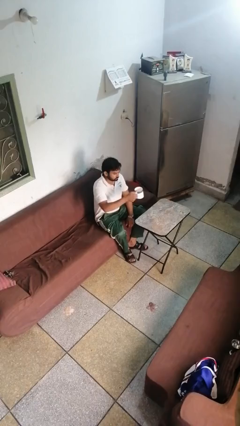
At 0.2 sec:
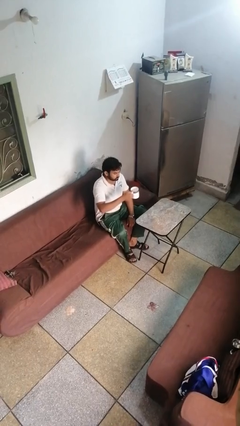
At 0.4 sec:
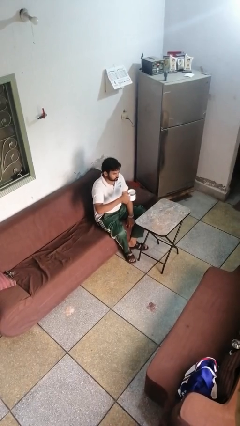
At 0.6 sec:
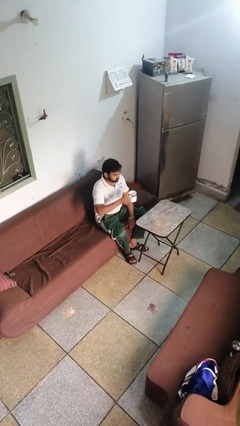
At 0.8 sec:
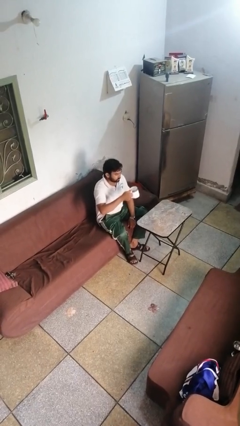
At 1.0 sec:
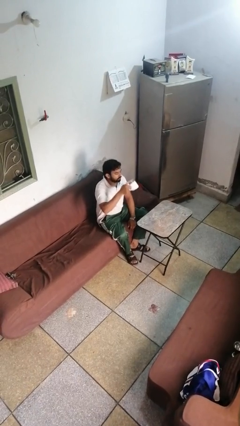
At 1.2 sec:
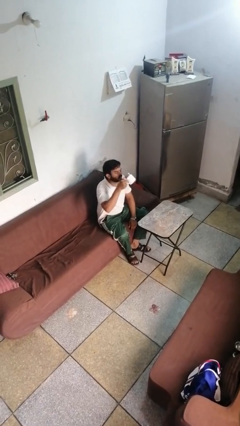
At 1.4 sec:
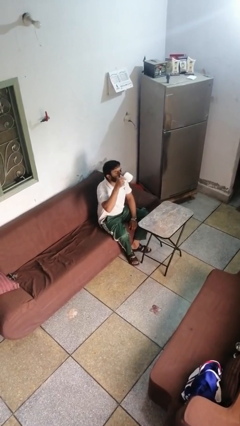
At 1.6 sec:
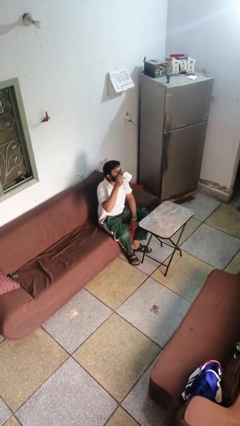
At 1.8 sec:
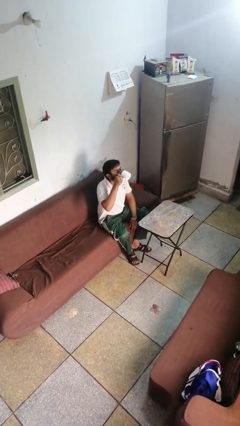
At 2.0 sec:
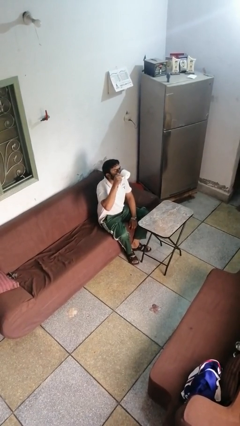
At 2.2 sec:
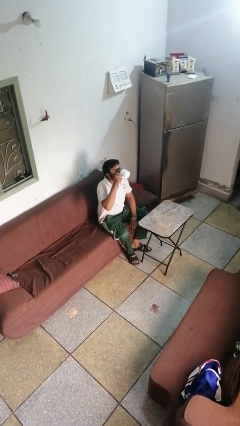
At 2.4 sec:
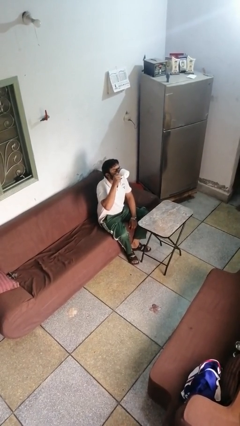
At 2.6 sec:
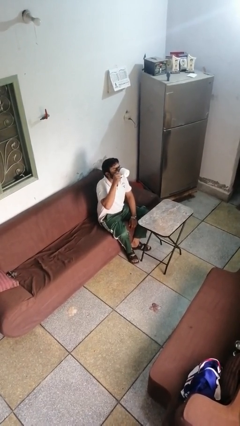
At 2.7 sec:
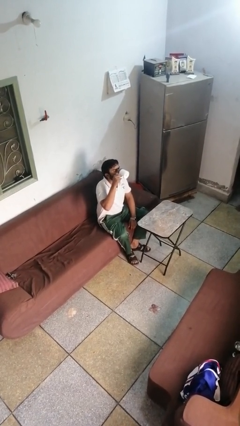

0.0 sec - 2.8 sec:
person drinks from mug

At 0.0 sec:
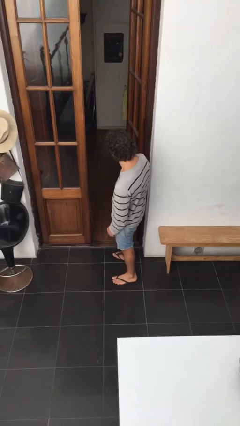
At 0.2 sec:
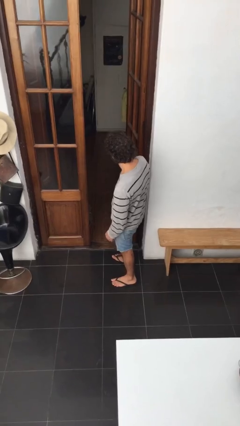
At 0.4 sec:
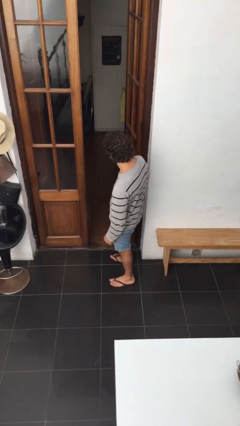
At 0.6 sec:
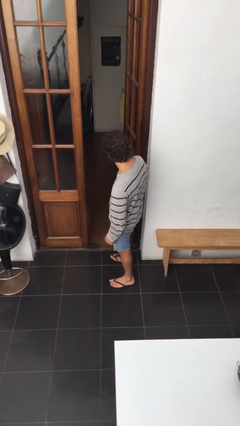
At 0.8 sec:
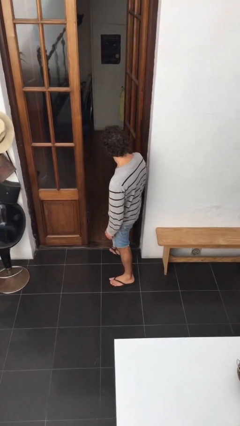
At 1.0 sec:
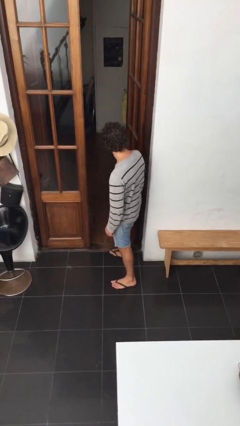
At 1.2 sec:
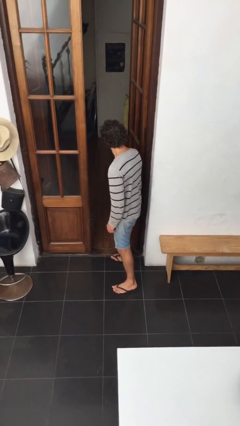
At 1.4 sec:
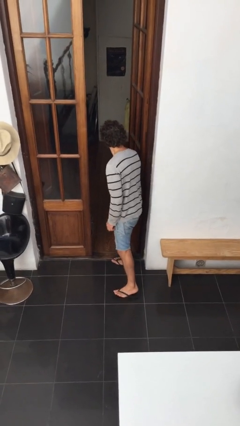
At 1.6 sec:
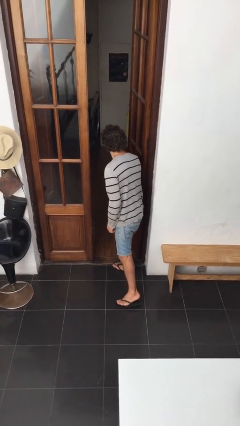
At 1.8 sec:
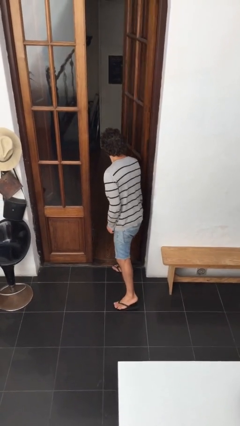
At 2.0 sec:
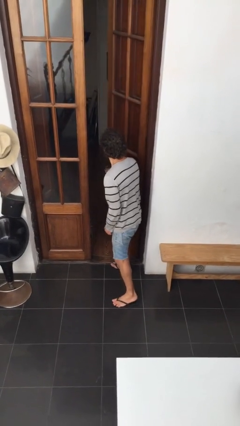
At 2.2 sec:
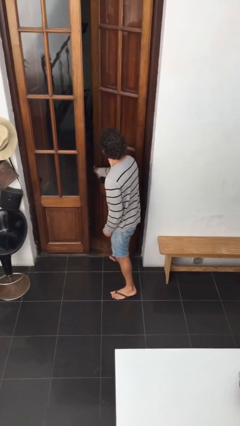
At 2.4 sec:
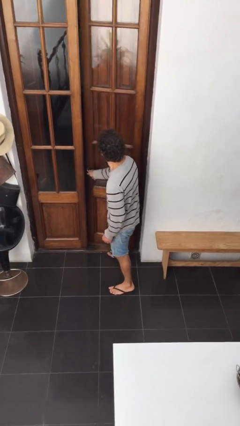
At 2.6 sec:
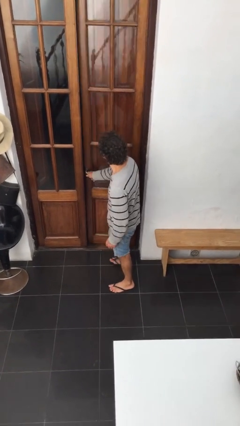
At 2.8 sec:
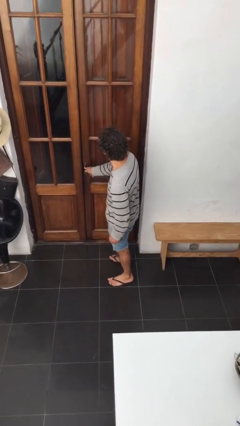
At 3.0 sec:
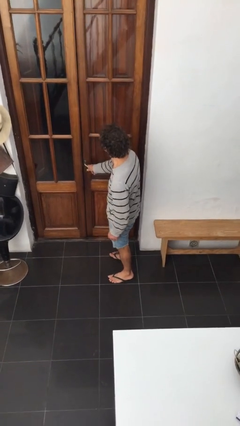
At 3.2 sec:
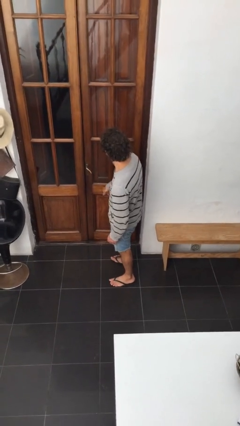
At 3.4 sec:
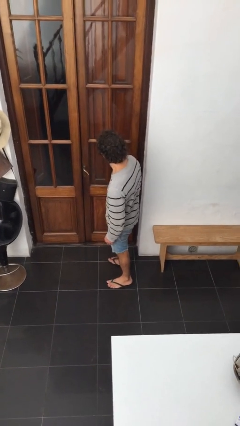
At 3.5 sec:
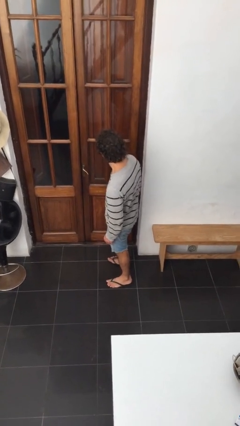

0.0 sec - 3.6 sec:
person closes facility door

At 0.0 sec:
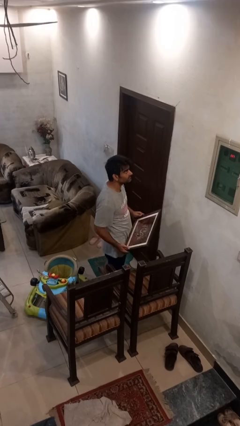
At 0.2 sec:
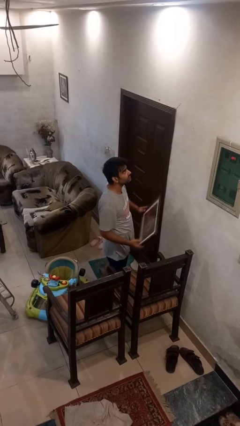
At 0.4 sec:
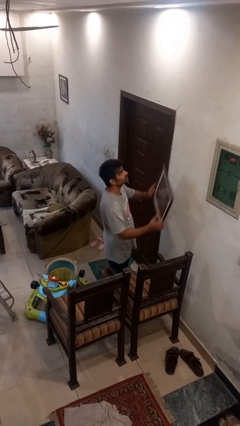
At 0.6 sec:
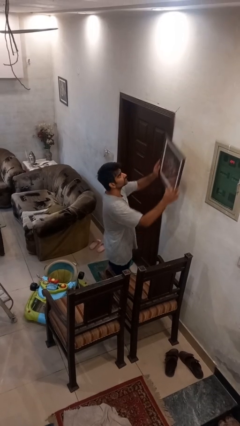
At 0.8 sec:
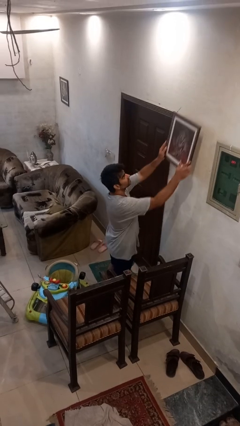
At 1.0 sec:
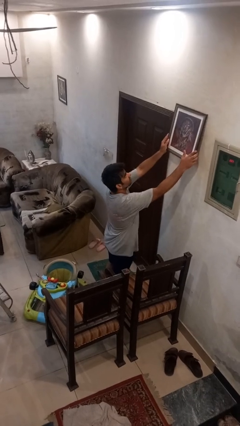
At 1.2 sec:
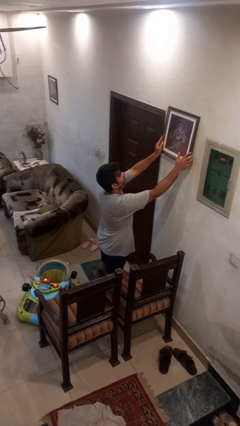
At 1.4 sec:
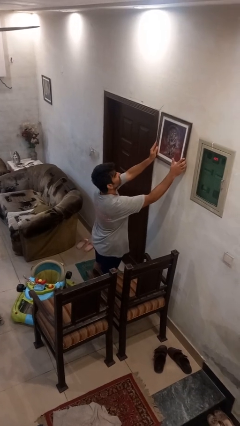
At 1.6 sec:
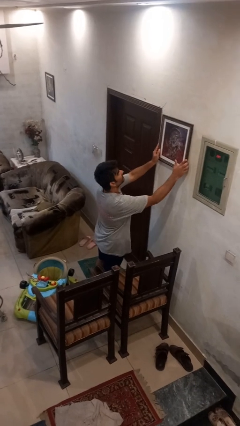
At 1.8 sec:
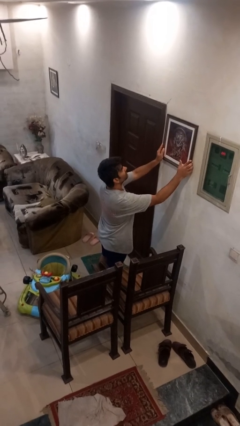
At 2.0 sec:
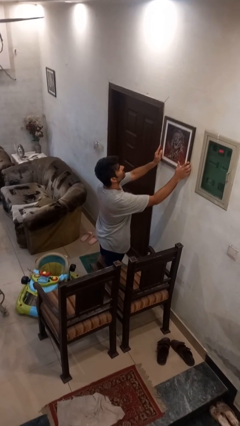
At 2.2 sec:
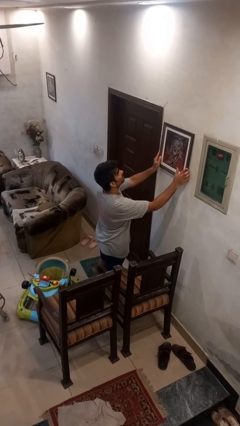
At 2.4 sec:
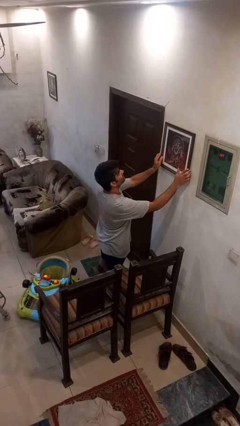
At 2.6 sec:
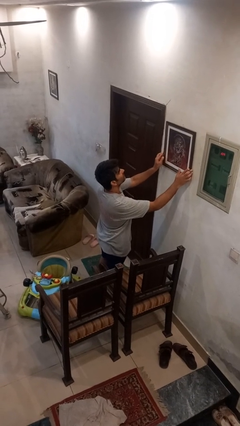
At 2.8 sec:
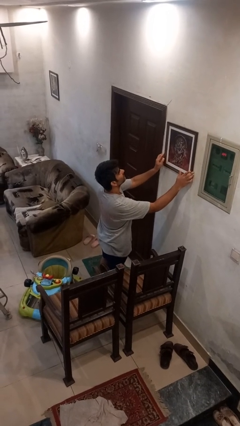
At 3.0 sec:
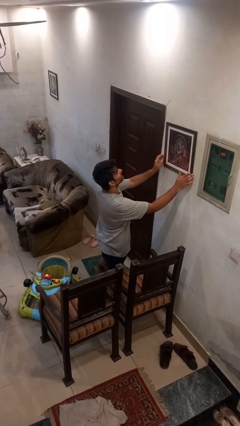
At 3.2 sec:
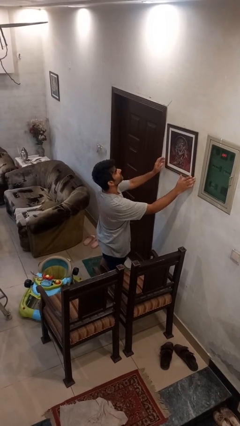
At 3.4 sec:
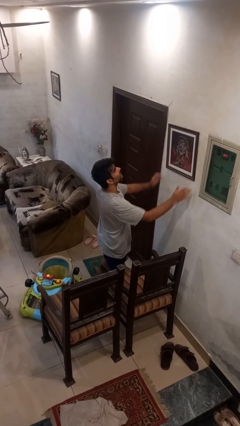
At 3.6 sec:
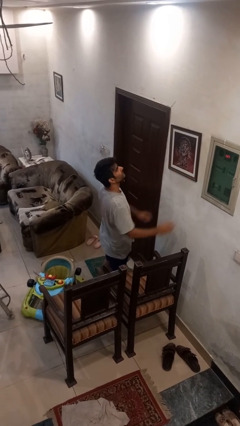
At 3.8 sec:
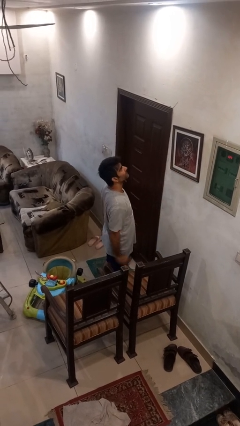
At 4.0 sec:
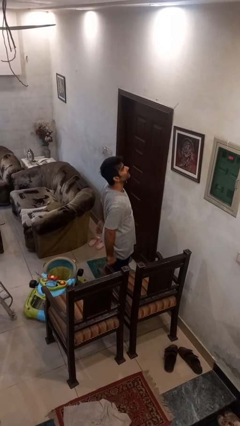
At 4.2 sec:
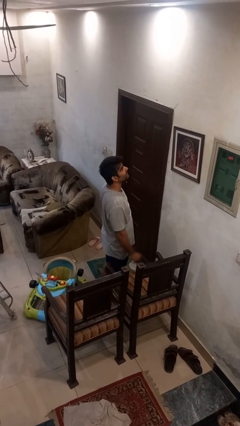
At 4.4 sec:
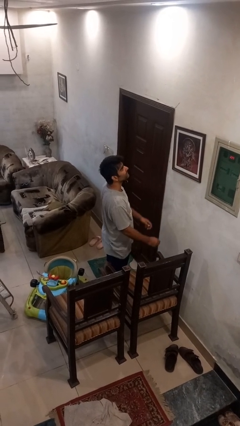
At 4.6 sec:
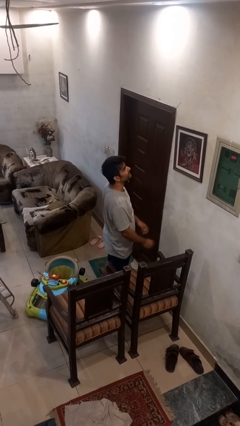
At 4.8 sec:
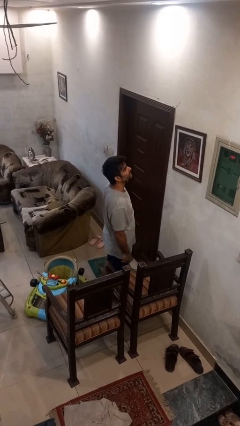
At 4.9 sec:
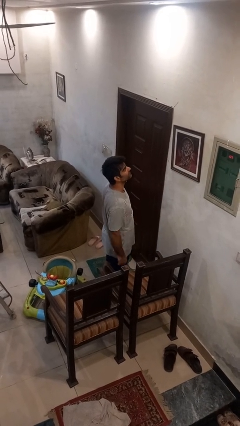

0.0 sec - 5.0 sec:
person puts up picture frame

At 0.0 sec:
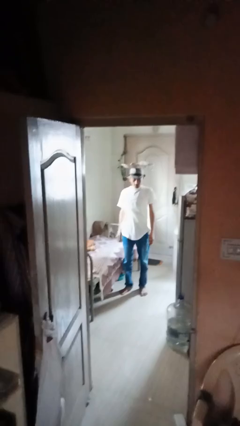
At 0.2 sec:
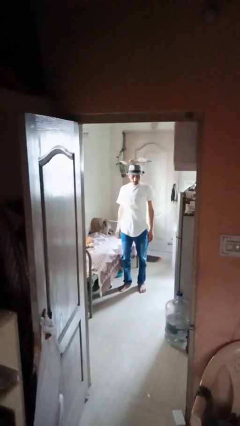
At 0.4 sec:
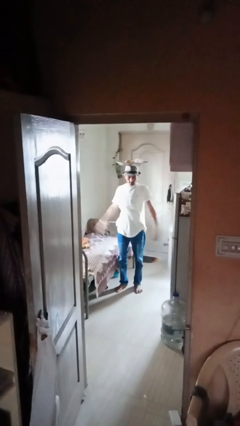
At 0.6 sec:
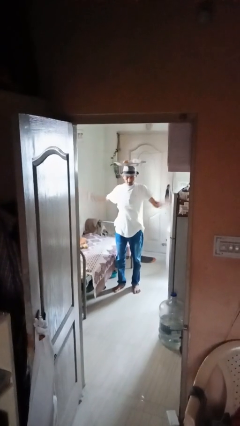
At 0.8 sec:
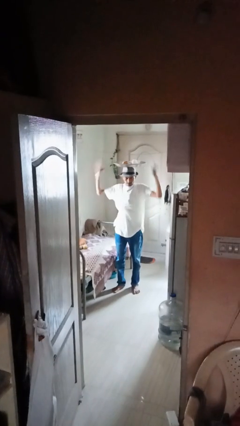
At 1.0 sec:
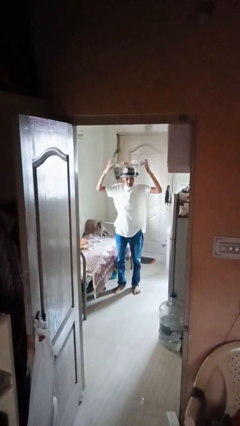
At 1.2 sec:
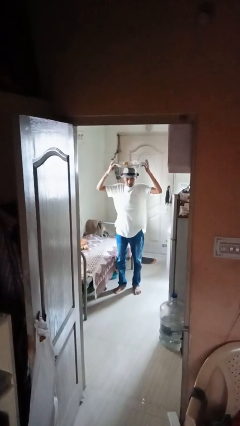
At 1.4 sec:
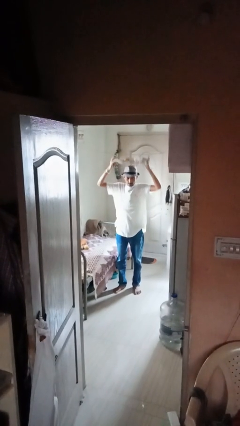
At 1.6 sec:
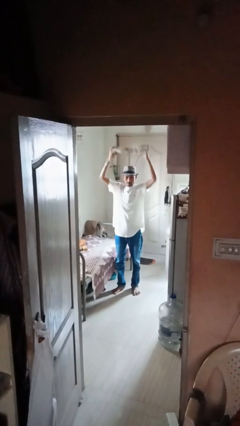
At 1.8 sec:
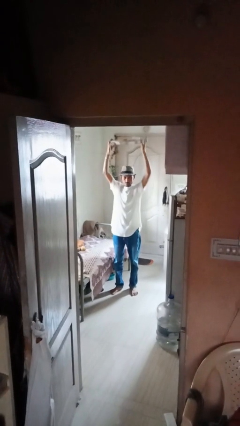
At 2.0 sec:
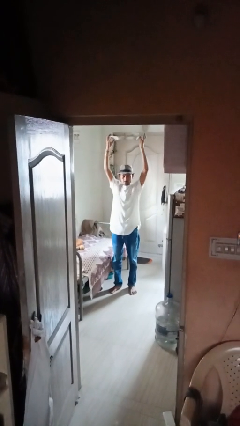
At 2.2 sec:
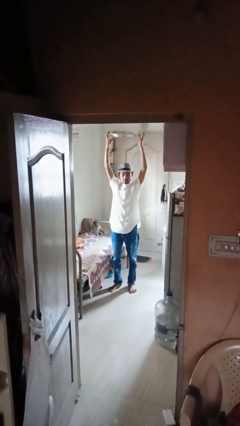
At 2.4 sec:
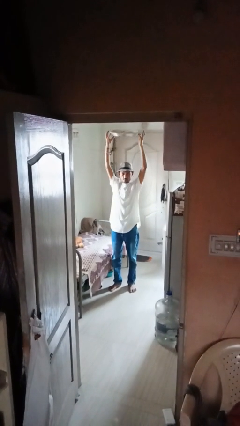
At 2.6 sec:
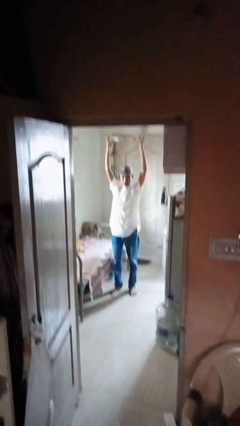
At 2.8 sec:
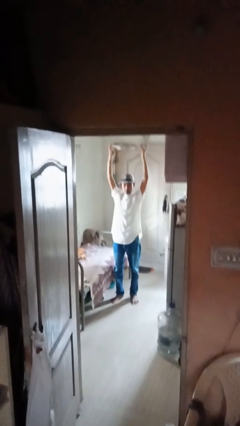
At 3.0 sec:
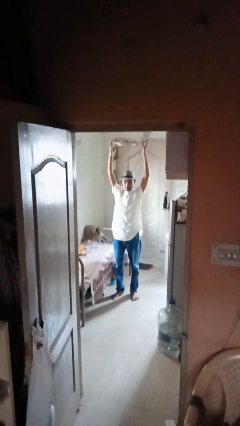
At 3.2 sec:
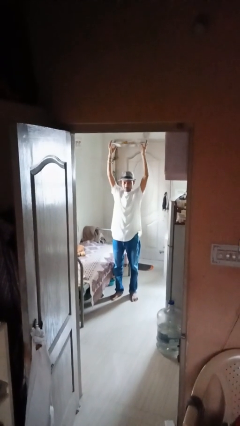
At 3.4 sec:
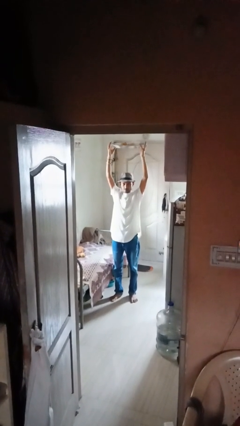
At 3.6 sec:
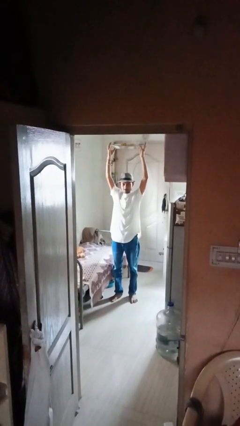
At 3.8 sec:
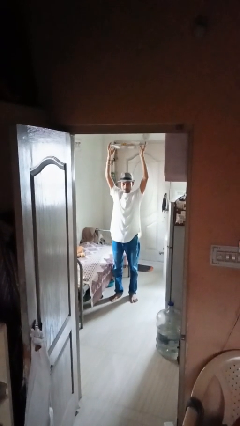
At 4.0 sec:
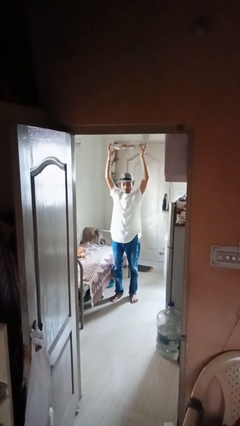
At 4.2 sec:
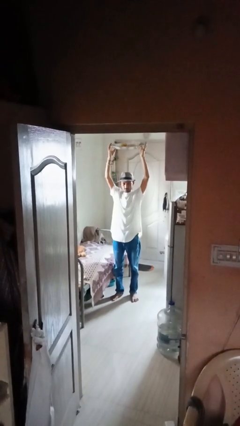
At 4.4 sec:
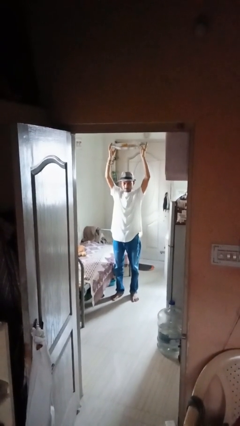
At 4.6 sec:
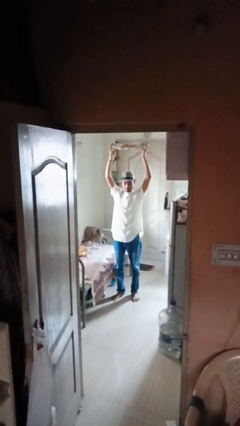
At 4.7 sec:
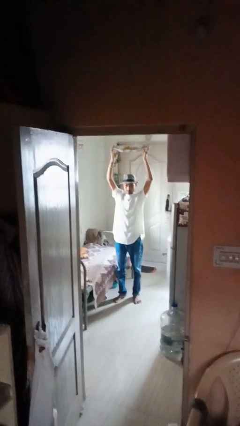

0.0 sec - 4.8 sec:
person holds object above head

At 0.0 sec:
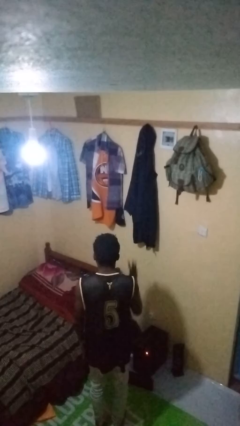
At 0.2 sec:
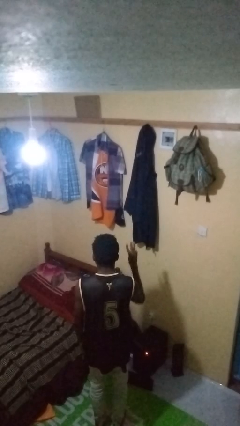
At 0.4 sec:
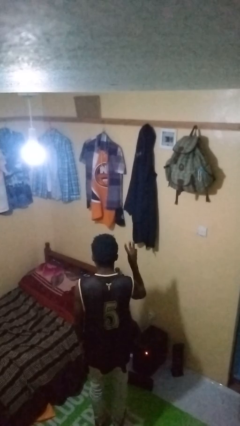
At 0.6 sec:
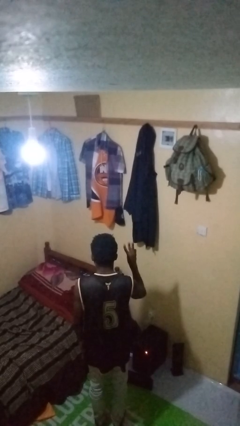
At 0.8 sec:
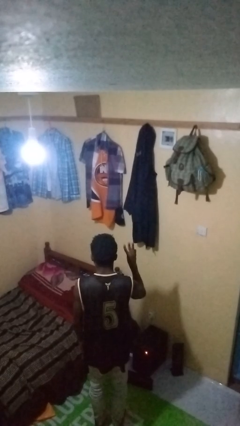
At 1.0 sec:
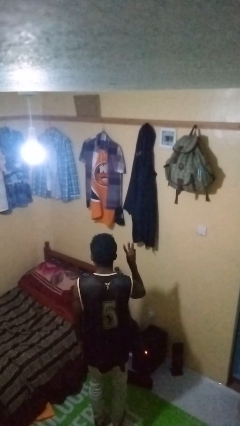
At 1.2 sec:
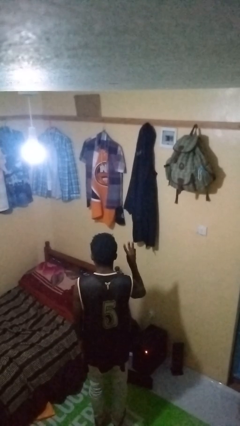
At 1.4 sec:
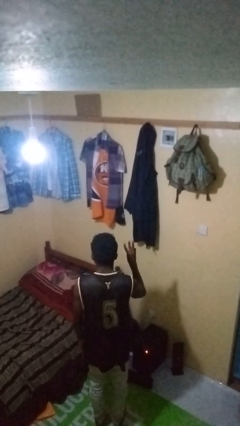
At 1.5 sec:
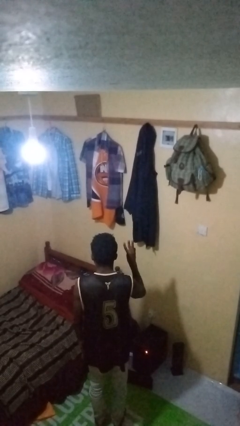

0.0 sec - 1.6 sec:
person gestures number three
